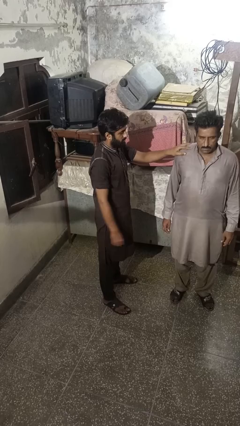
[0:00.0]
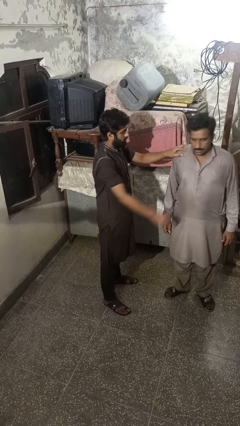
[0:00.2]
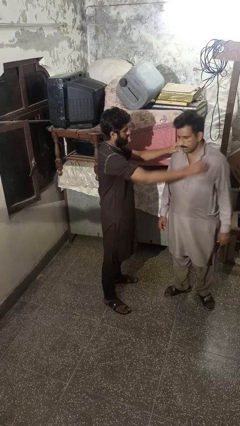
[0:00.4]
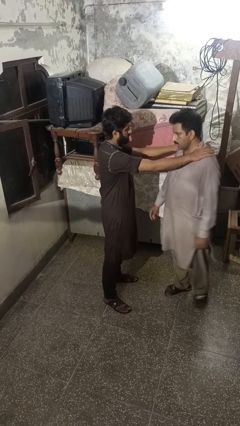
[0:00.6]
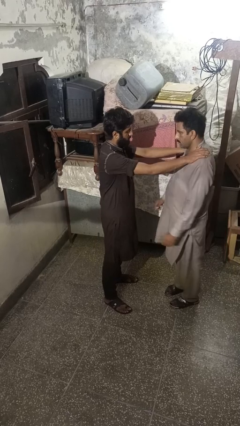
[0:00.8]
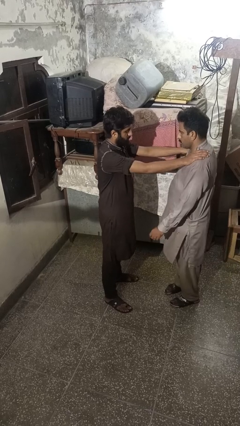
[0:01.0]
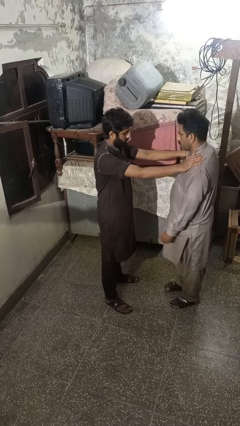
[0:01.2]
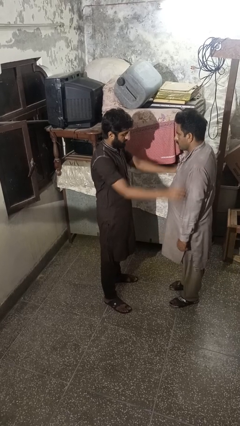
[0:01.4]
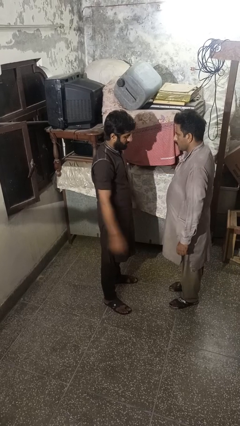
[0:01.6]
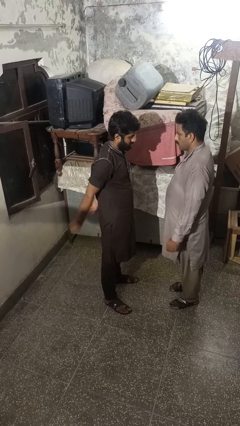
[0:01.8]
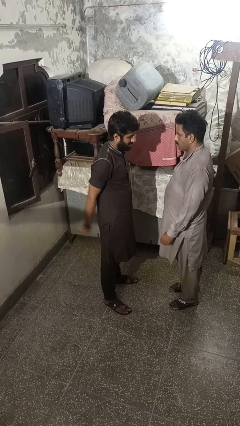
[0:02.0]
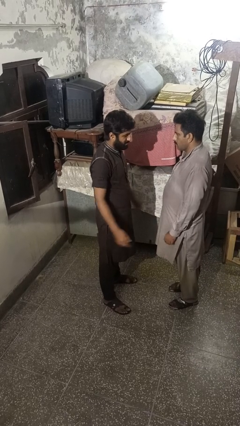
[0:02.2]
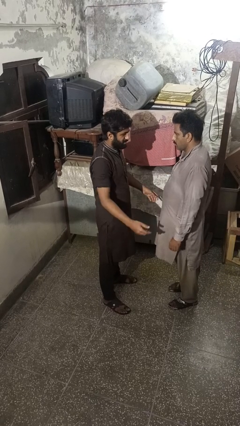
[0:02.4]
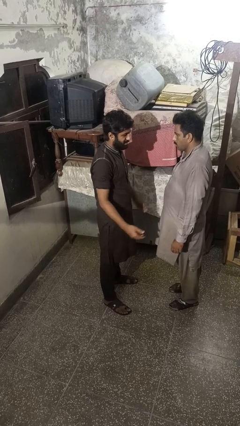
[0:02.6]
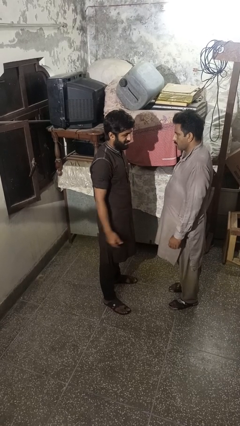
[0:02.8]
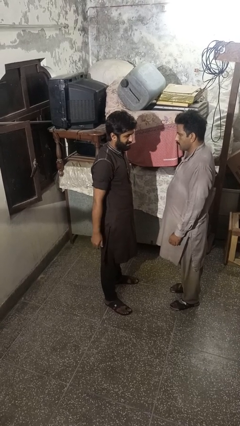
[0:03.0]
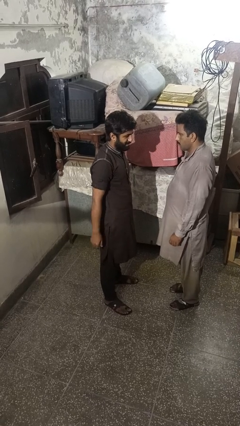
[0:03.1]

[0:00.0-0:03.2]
person spins person around

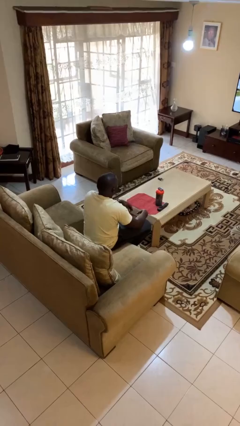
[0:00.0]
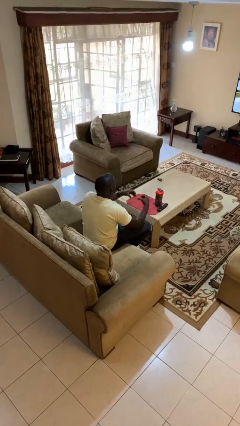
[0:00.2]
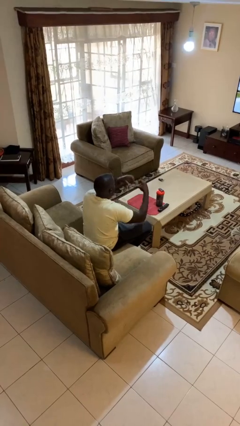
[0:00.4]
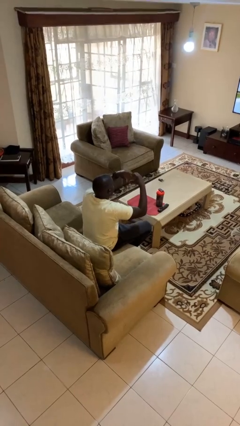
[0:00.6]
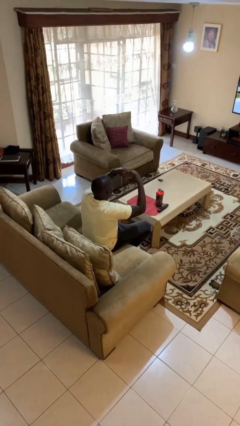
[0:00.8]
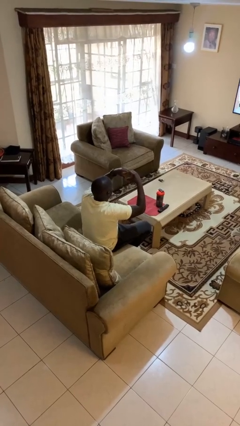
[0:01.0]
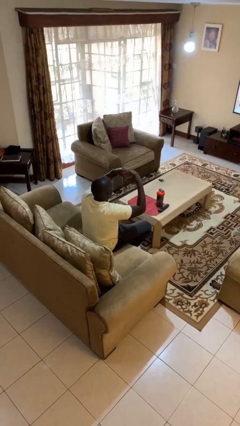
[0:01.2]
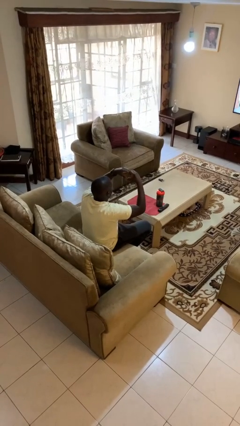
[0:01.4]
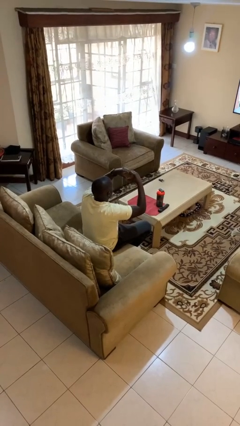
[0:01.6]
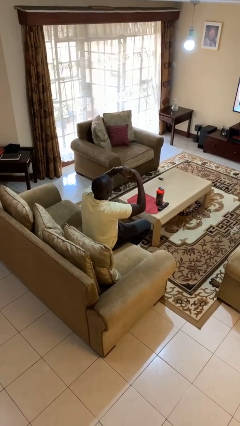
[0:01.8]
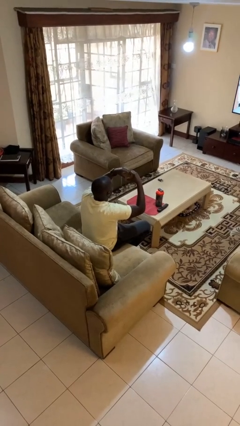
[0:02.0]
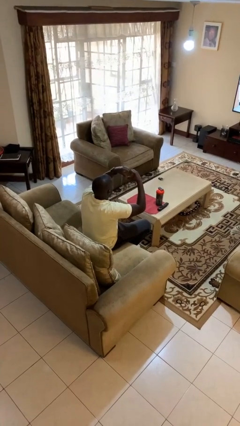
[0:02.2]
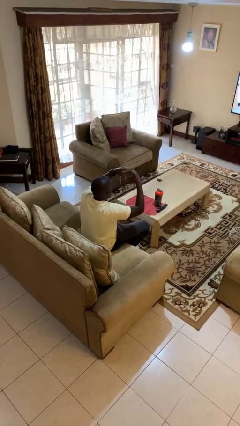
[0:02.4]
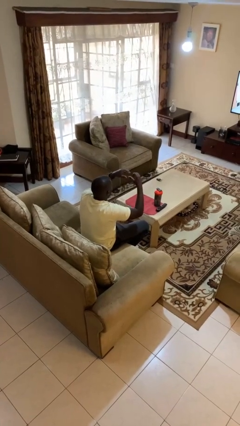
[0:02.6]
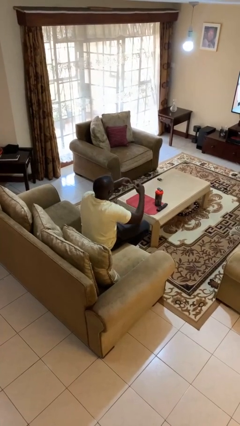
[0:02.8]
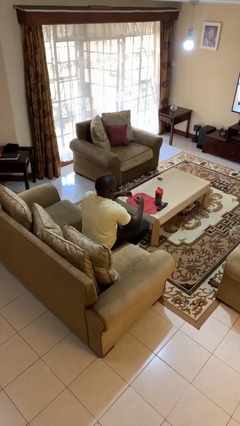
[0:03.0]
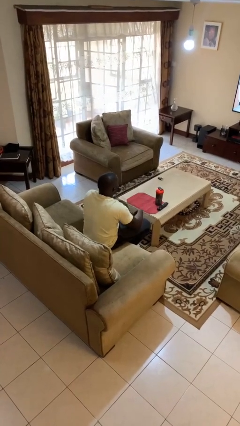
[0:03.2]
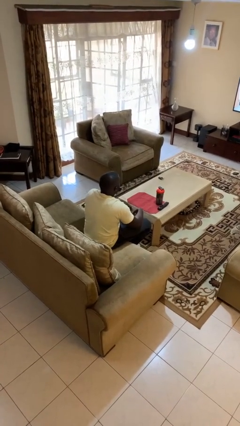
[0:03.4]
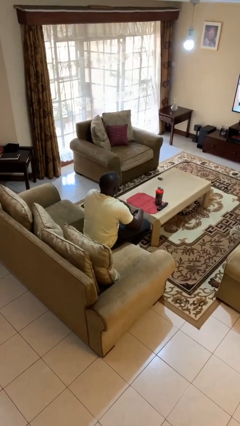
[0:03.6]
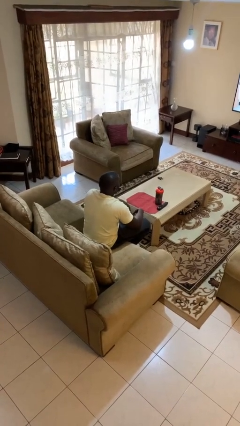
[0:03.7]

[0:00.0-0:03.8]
person gestures heart

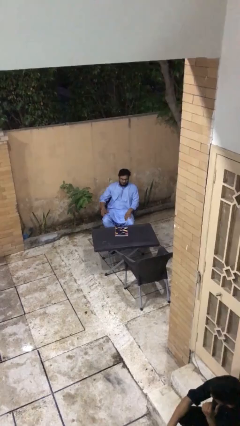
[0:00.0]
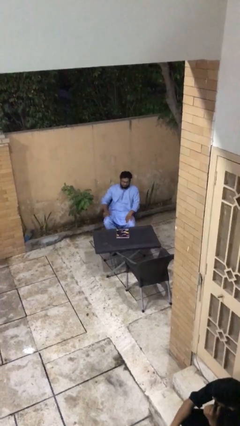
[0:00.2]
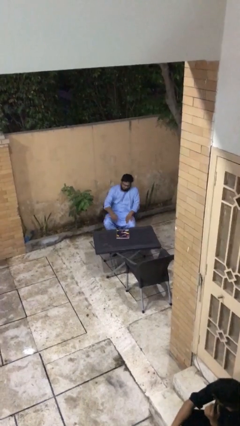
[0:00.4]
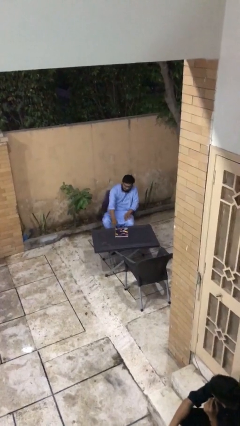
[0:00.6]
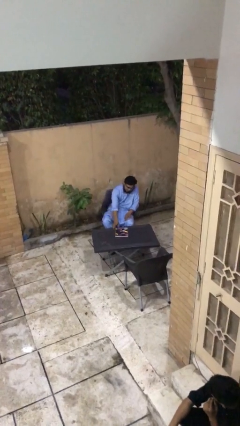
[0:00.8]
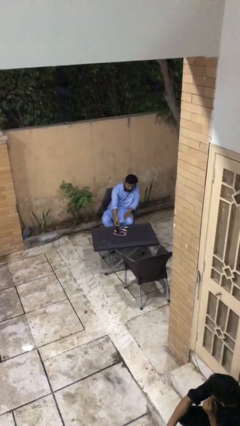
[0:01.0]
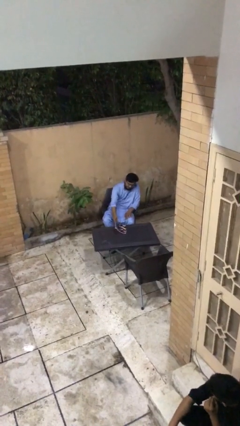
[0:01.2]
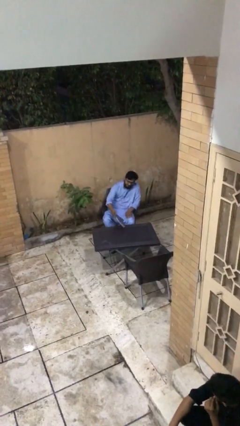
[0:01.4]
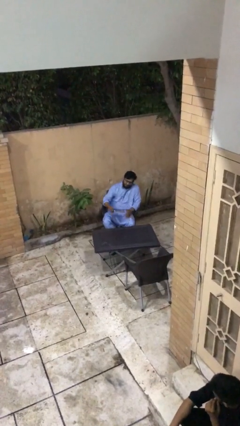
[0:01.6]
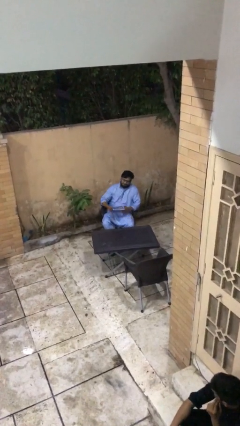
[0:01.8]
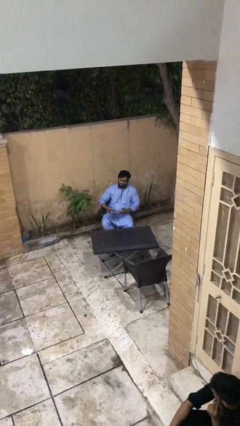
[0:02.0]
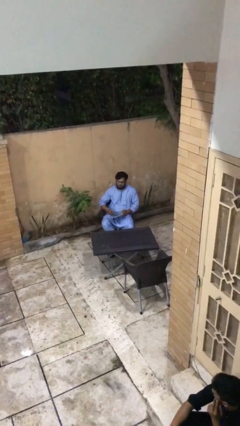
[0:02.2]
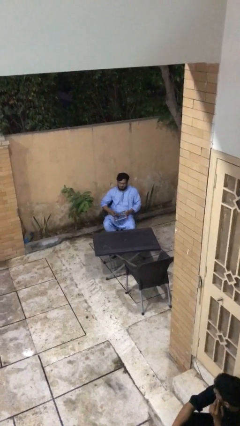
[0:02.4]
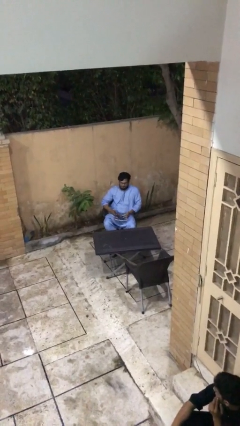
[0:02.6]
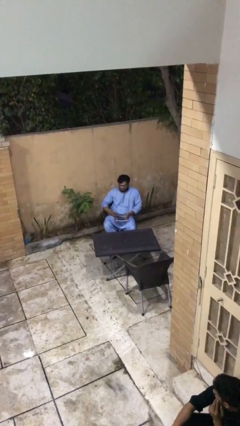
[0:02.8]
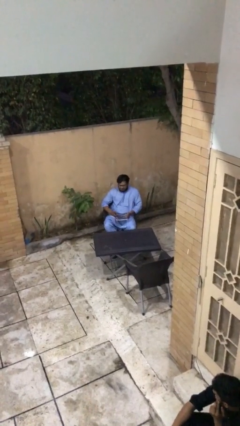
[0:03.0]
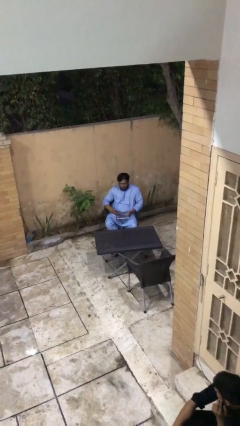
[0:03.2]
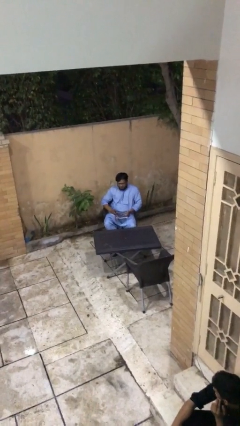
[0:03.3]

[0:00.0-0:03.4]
person picks up object from table

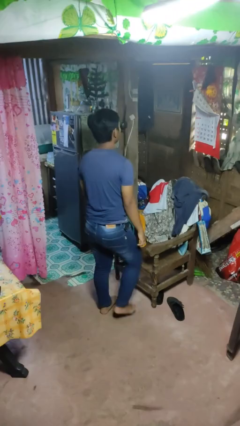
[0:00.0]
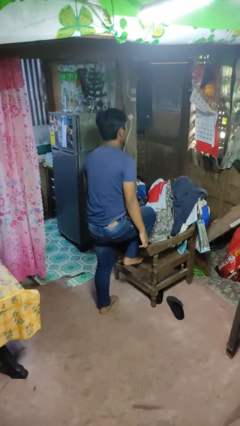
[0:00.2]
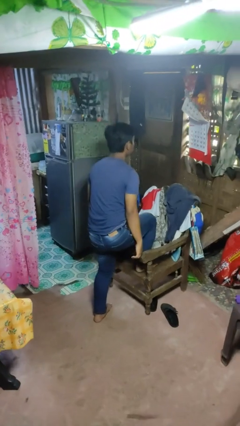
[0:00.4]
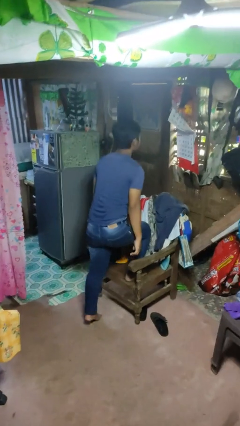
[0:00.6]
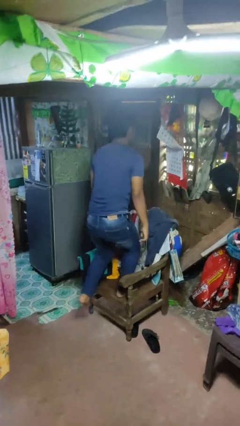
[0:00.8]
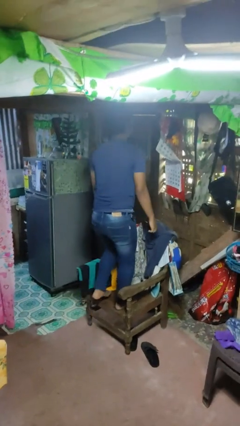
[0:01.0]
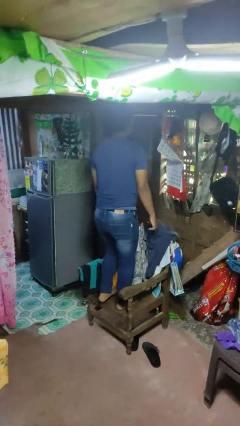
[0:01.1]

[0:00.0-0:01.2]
person climbs on chair

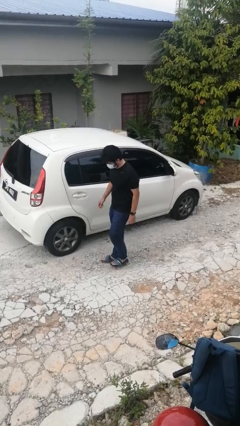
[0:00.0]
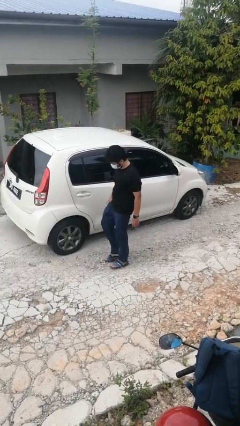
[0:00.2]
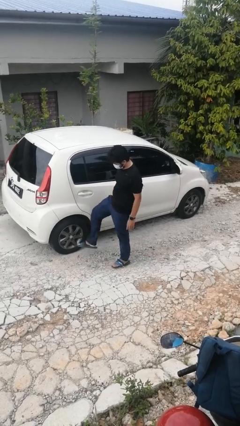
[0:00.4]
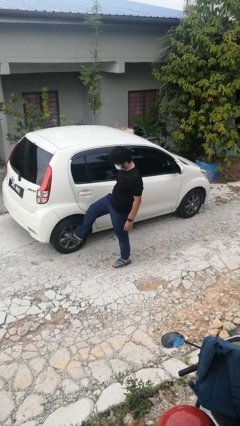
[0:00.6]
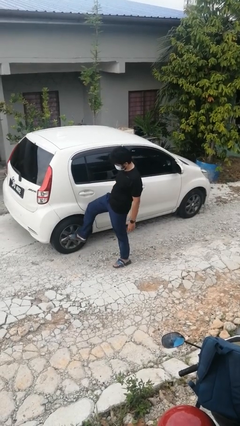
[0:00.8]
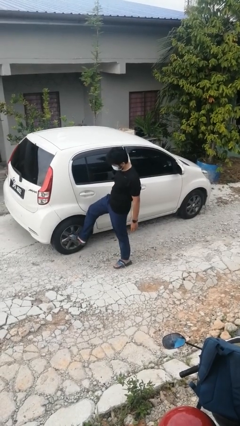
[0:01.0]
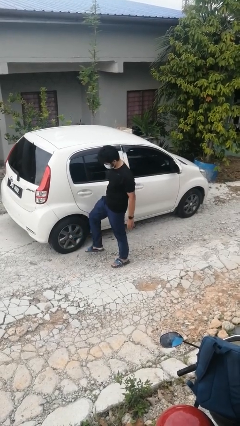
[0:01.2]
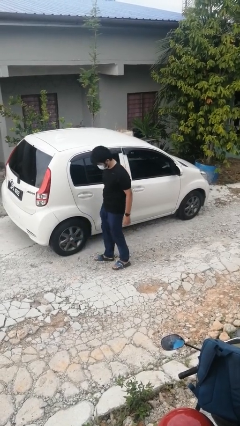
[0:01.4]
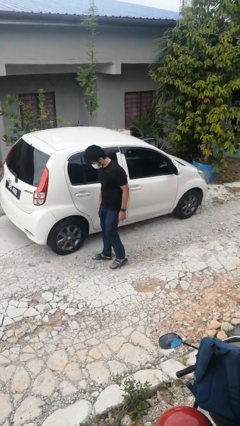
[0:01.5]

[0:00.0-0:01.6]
person kicks car tires

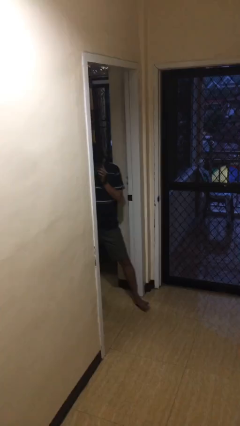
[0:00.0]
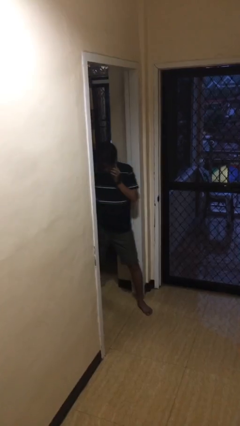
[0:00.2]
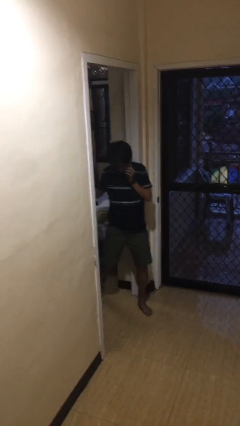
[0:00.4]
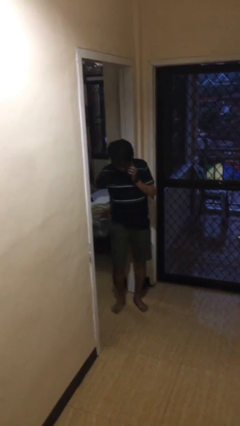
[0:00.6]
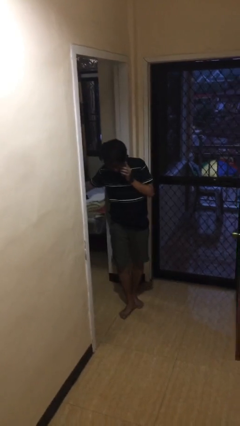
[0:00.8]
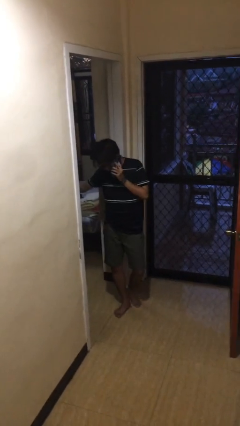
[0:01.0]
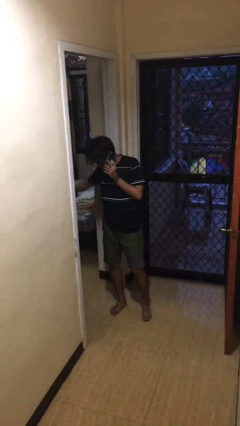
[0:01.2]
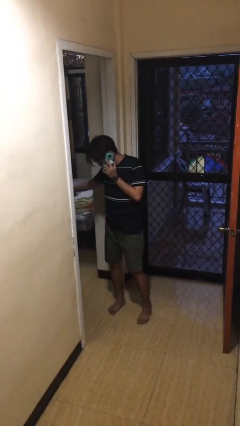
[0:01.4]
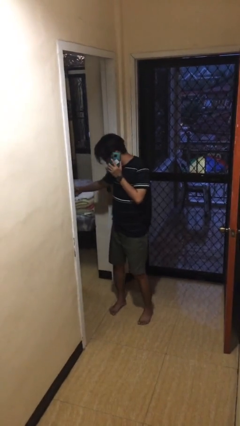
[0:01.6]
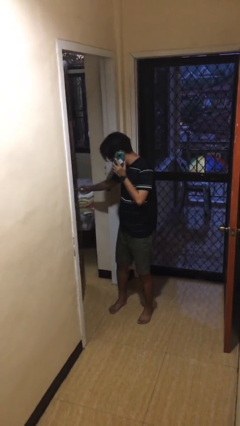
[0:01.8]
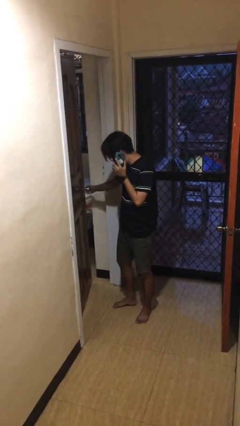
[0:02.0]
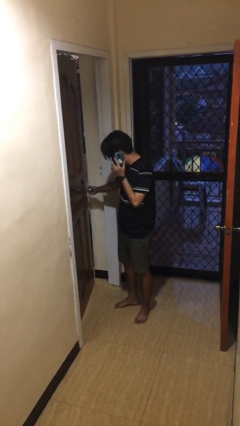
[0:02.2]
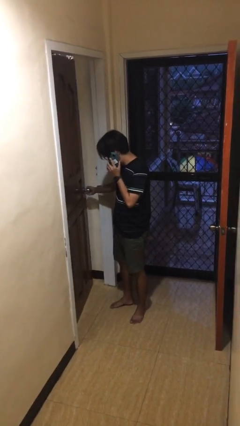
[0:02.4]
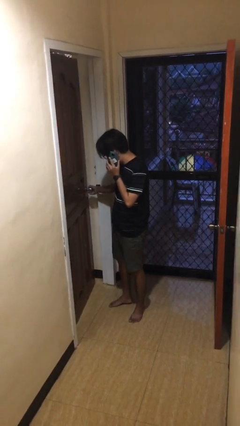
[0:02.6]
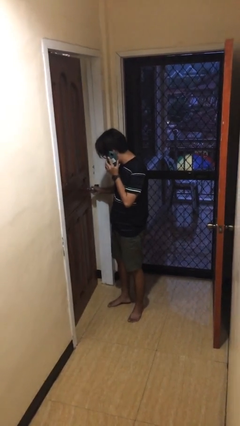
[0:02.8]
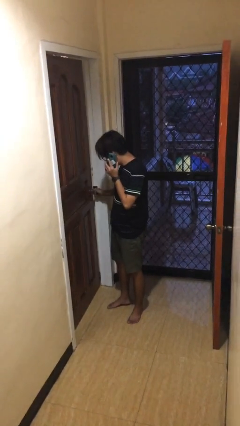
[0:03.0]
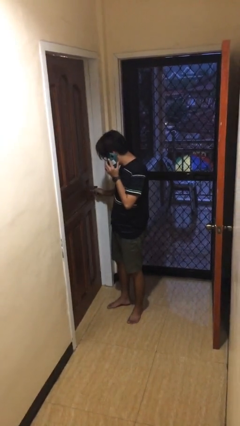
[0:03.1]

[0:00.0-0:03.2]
person enters scene through structure

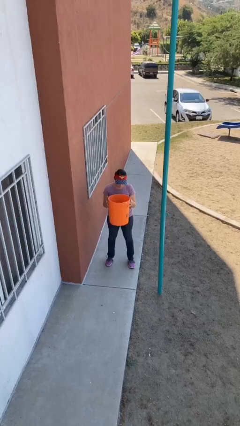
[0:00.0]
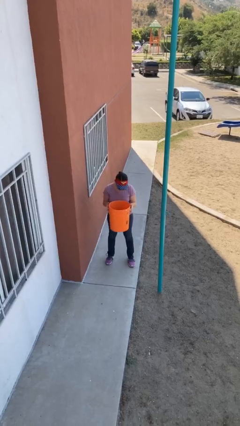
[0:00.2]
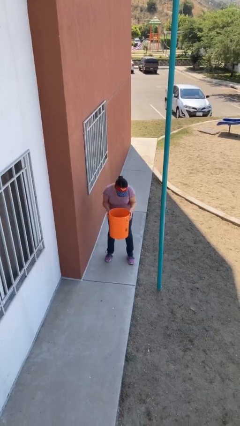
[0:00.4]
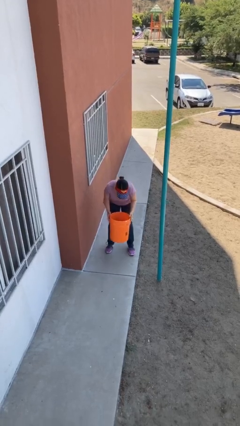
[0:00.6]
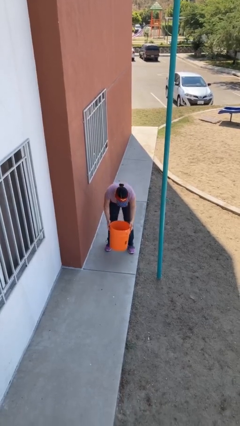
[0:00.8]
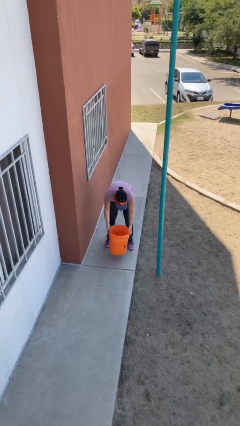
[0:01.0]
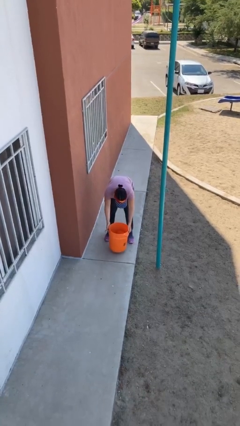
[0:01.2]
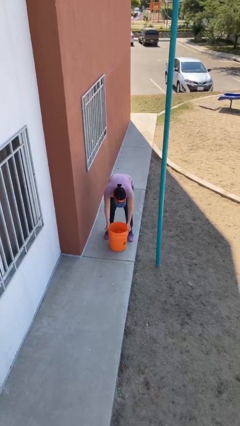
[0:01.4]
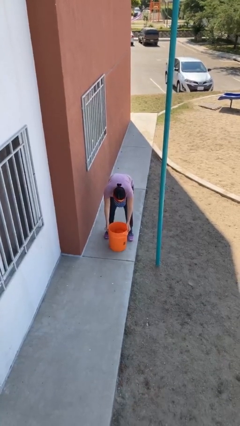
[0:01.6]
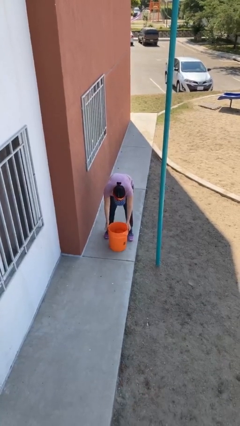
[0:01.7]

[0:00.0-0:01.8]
person puts down object on floor
